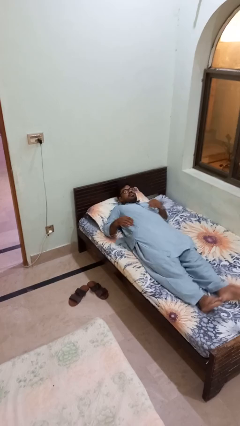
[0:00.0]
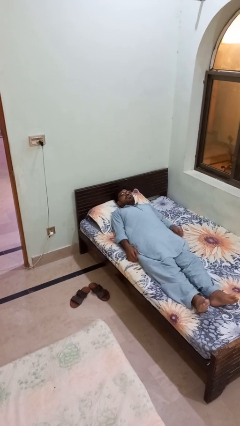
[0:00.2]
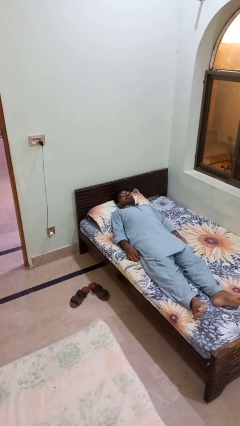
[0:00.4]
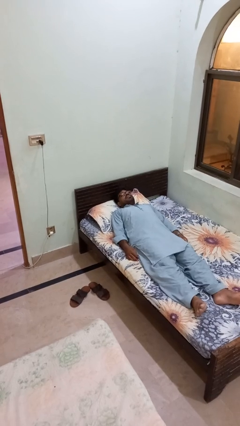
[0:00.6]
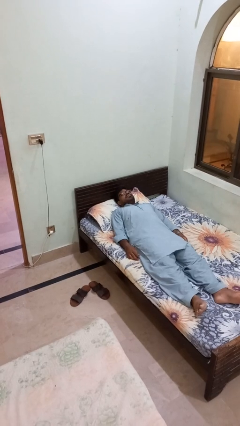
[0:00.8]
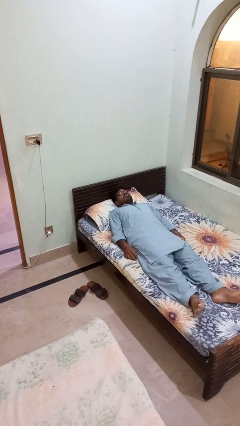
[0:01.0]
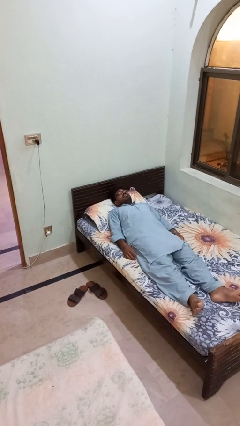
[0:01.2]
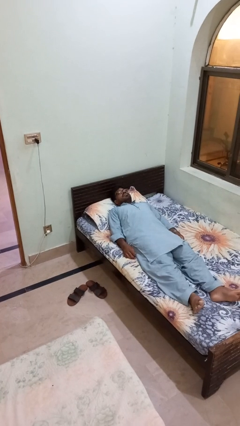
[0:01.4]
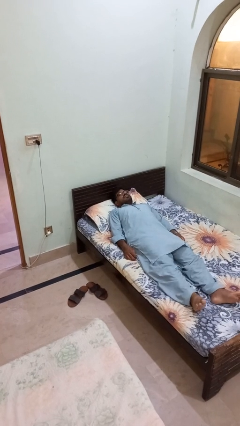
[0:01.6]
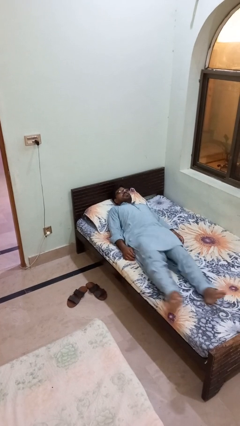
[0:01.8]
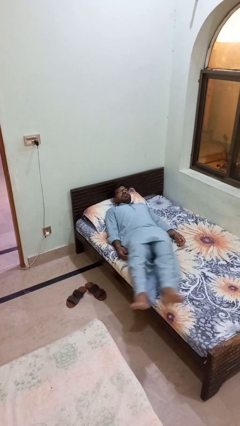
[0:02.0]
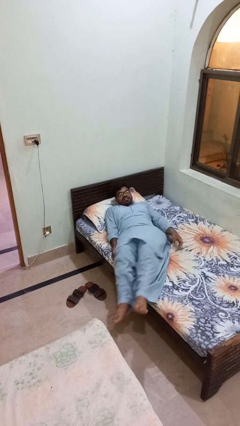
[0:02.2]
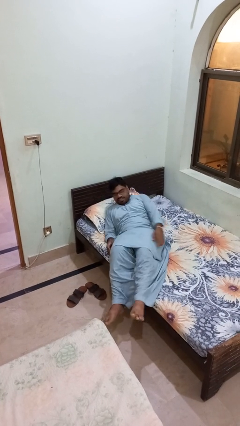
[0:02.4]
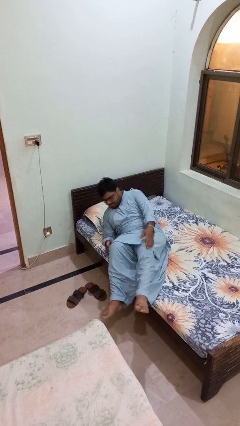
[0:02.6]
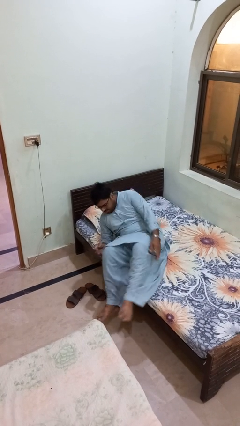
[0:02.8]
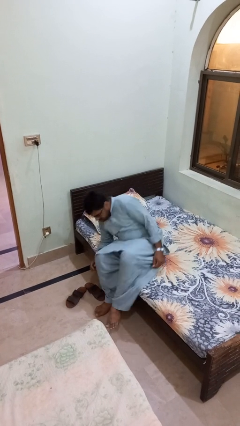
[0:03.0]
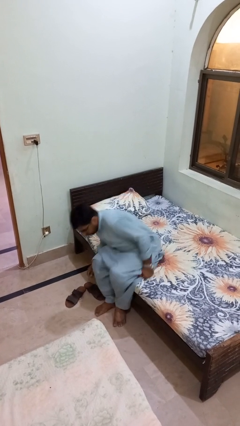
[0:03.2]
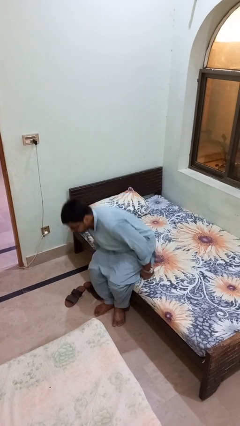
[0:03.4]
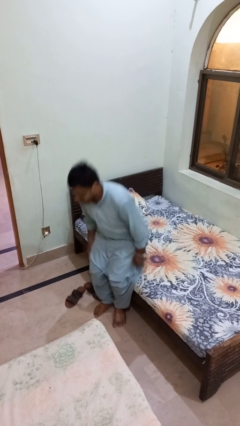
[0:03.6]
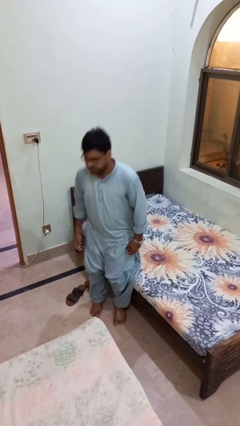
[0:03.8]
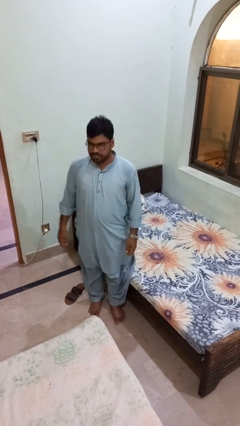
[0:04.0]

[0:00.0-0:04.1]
person stands up

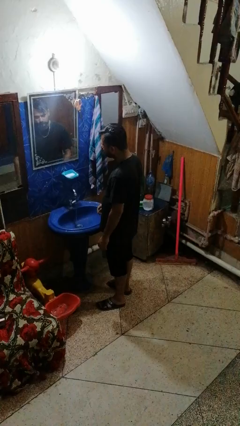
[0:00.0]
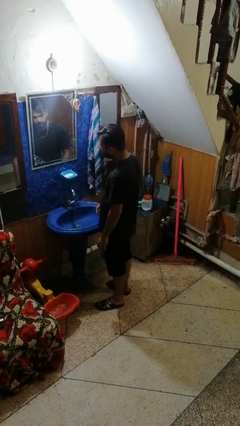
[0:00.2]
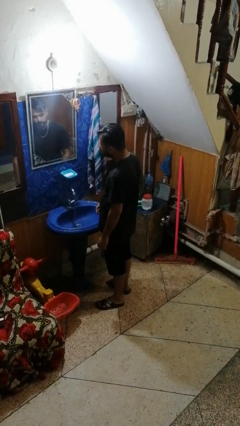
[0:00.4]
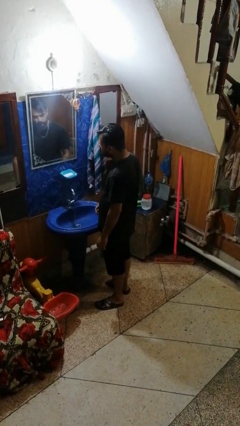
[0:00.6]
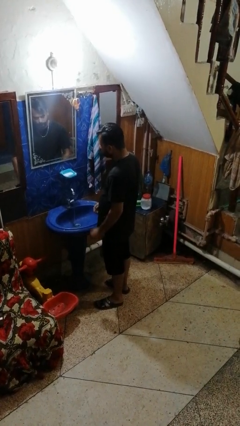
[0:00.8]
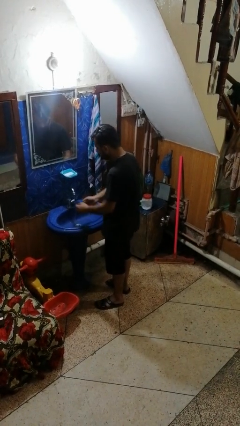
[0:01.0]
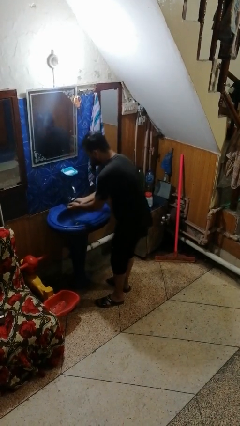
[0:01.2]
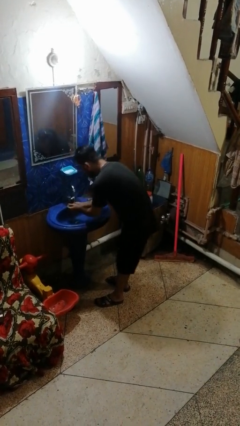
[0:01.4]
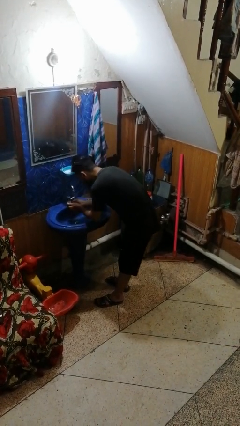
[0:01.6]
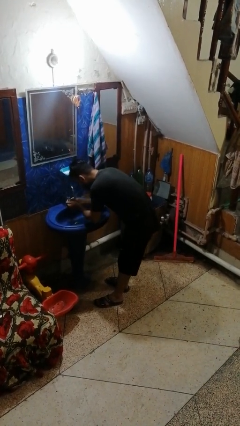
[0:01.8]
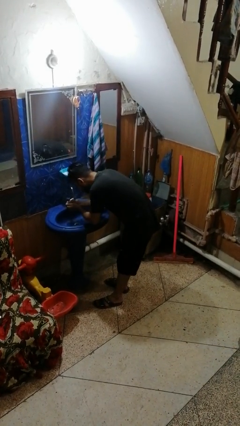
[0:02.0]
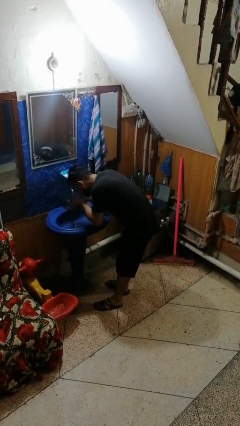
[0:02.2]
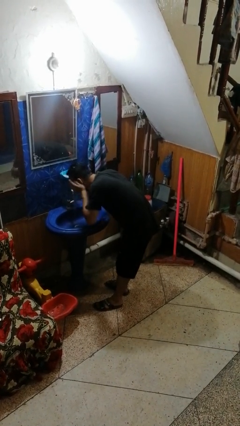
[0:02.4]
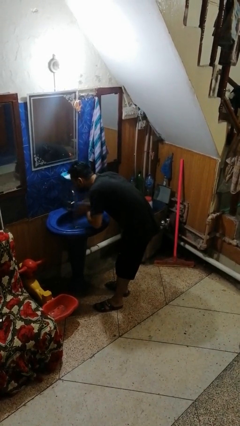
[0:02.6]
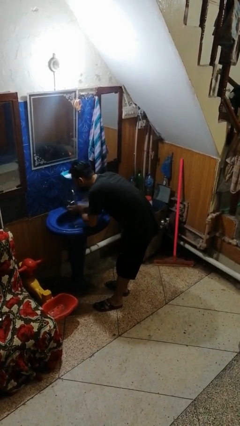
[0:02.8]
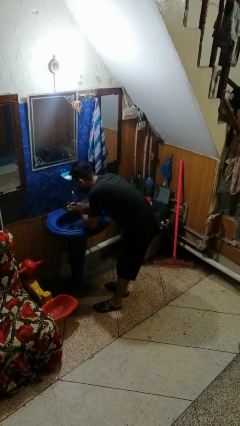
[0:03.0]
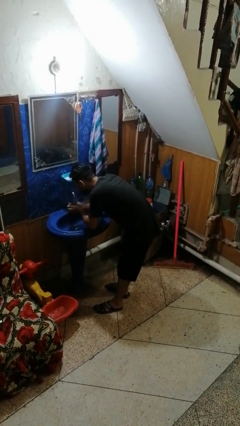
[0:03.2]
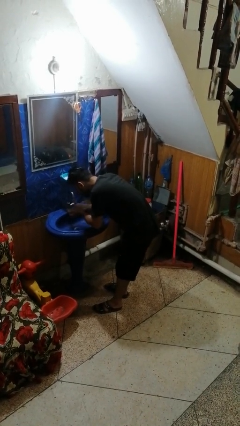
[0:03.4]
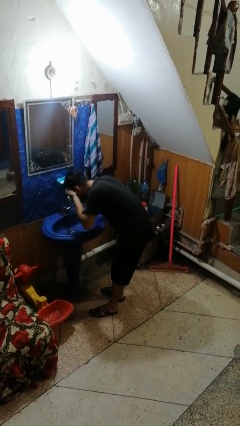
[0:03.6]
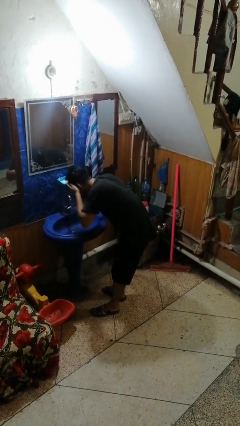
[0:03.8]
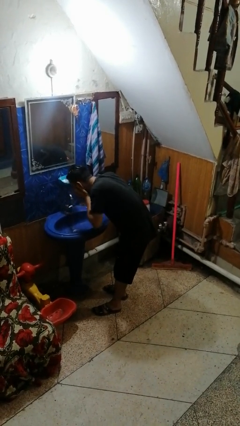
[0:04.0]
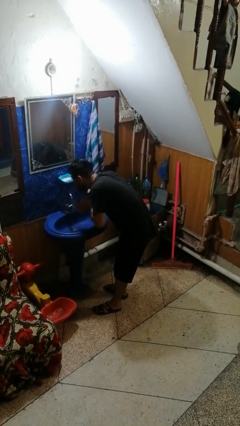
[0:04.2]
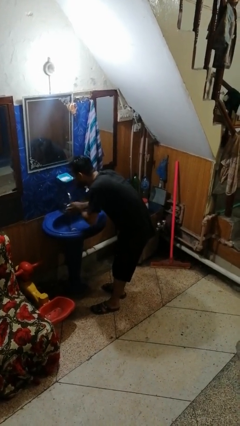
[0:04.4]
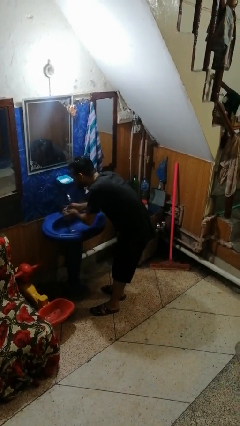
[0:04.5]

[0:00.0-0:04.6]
person washes face

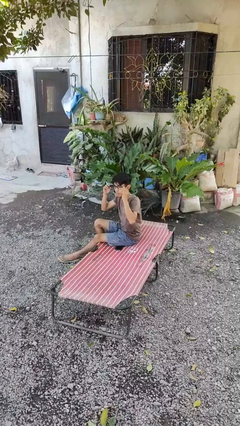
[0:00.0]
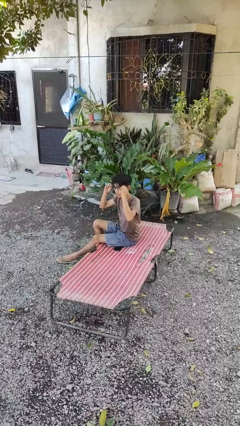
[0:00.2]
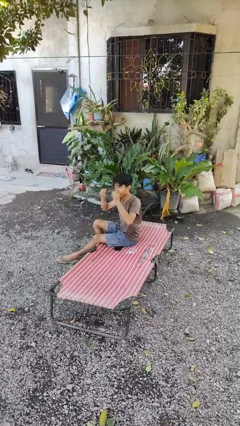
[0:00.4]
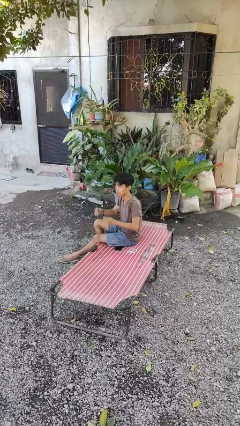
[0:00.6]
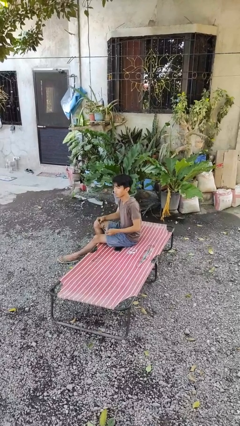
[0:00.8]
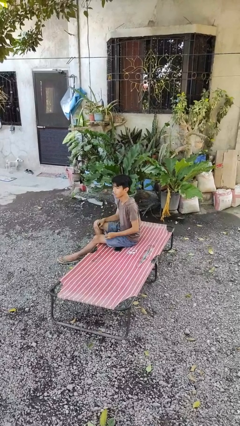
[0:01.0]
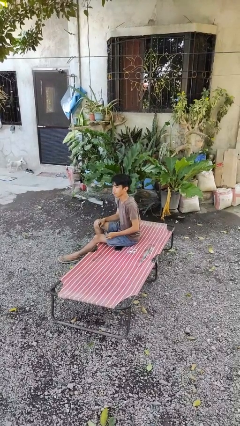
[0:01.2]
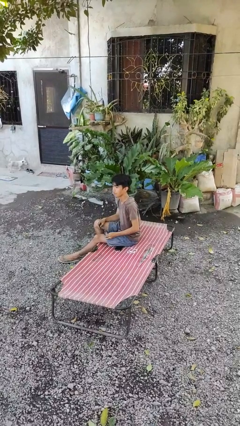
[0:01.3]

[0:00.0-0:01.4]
person takes off glasses

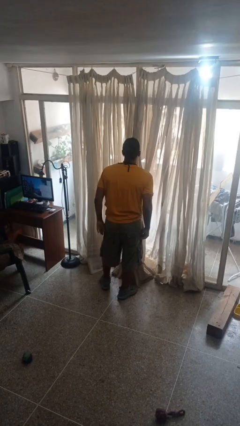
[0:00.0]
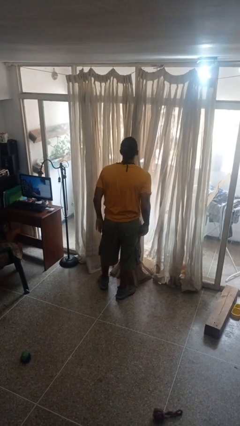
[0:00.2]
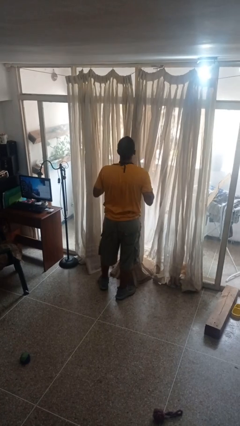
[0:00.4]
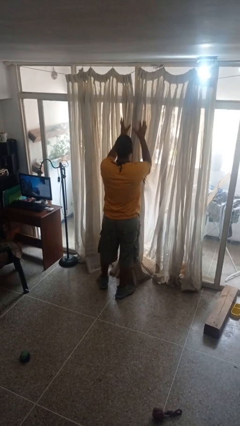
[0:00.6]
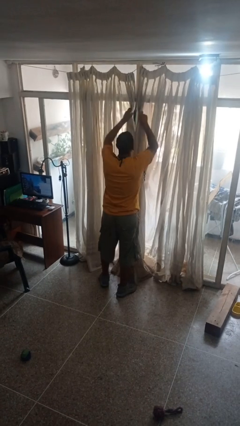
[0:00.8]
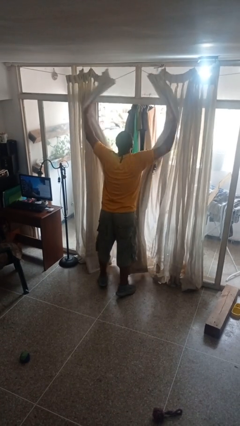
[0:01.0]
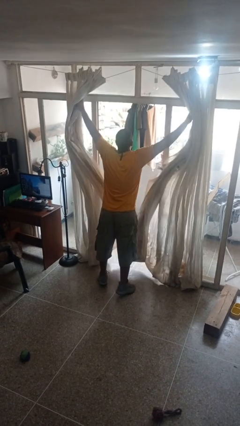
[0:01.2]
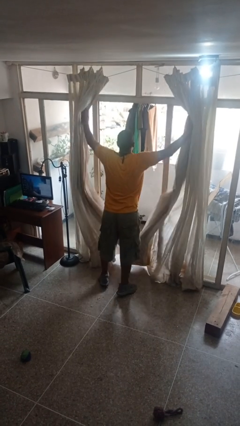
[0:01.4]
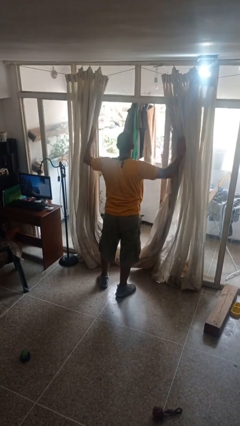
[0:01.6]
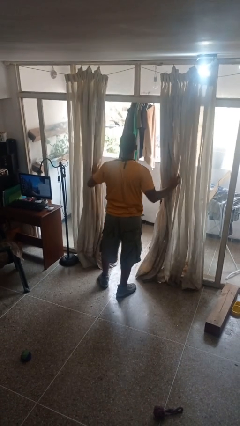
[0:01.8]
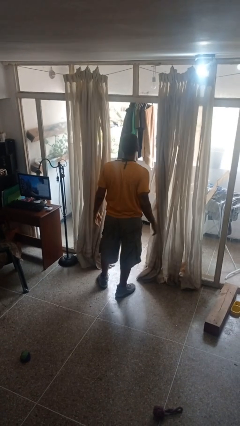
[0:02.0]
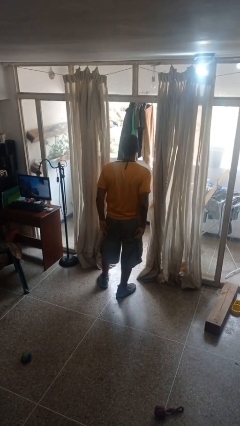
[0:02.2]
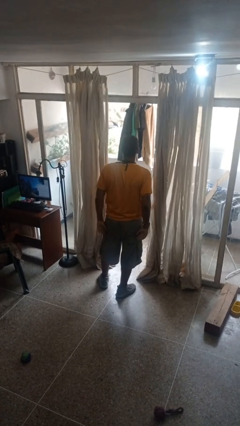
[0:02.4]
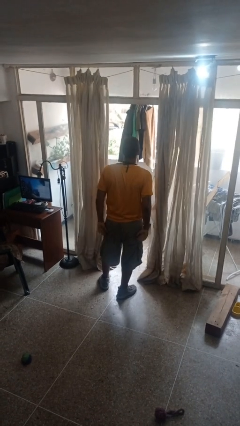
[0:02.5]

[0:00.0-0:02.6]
person opens curtains

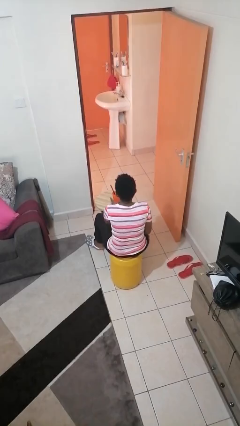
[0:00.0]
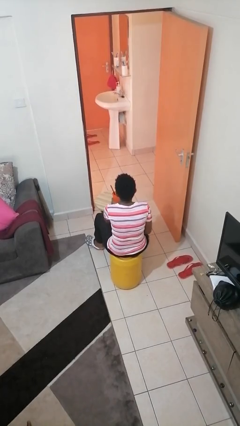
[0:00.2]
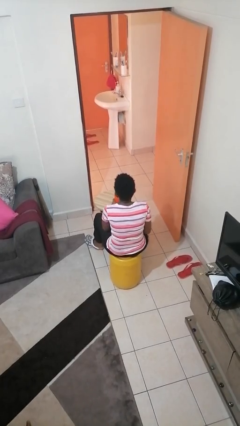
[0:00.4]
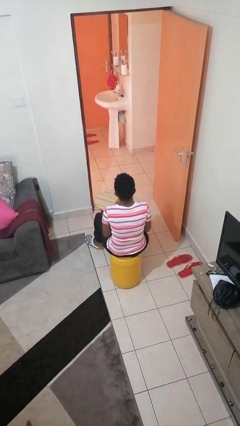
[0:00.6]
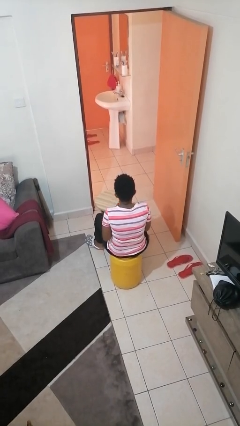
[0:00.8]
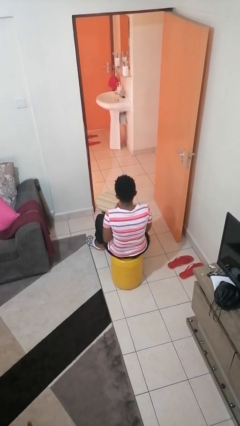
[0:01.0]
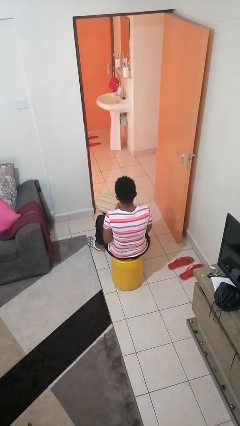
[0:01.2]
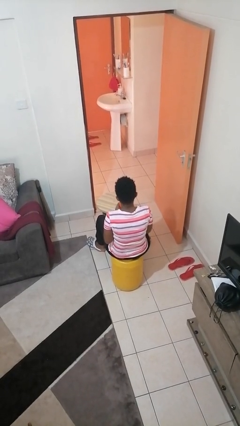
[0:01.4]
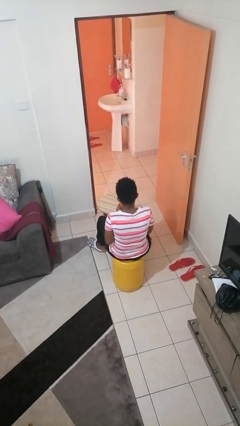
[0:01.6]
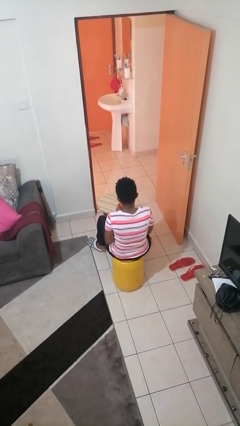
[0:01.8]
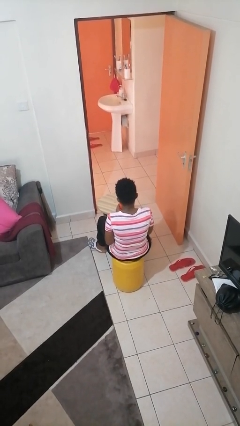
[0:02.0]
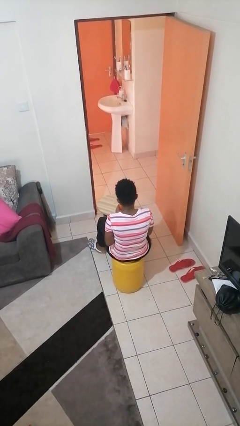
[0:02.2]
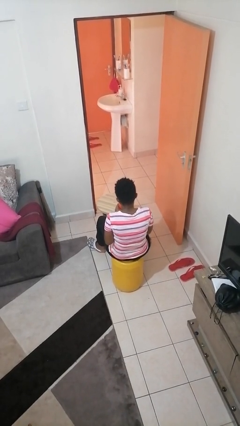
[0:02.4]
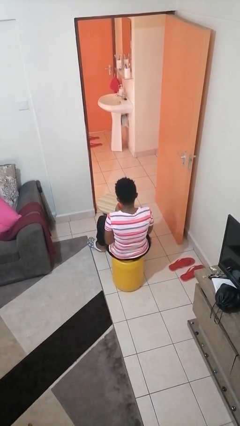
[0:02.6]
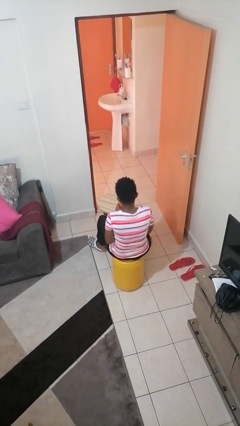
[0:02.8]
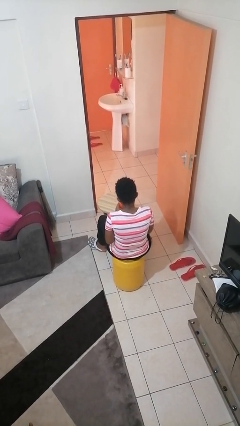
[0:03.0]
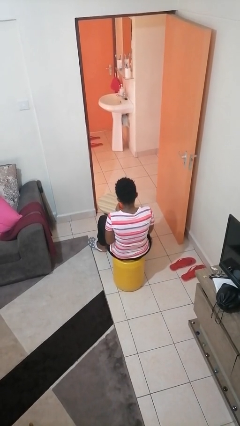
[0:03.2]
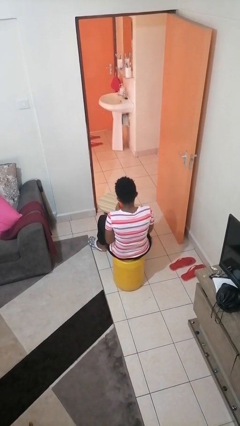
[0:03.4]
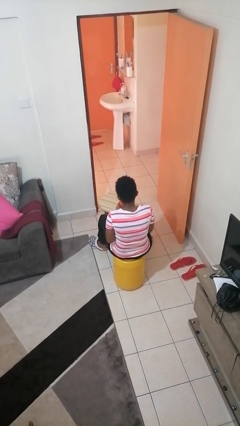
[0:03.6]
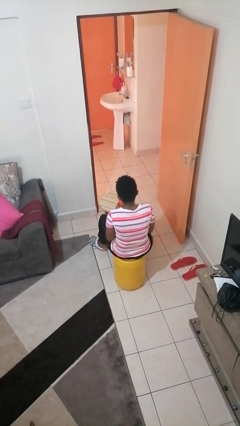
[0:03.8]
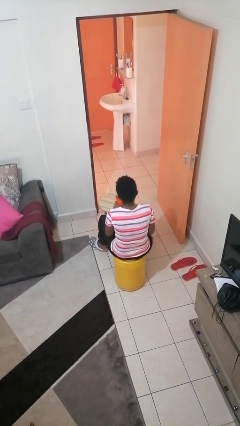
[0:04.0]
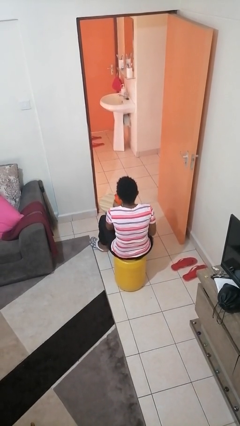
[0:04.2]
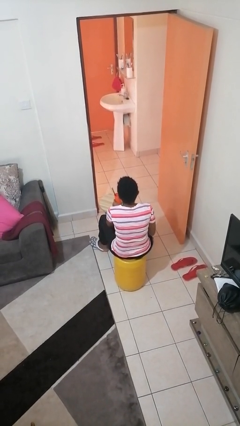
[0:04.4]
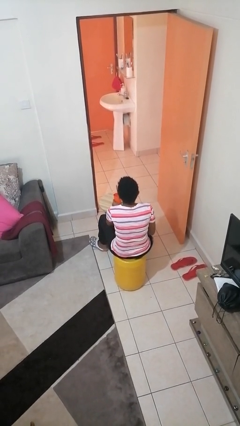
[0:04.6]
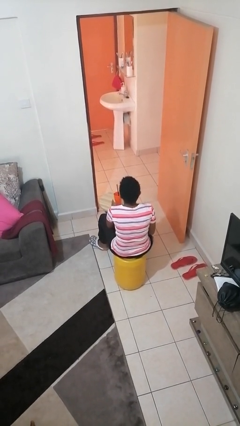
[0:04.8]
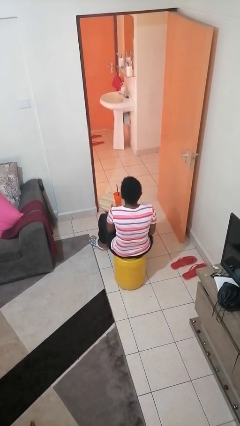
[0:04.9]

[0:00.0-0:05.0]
person drinks from straw
